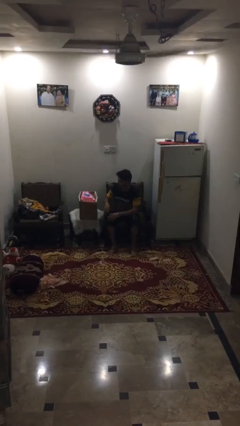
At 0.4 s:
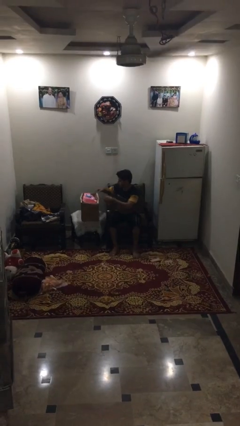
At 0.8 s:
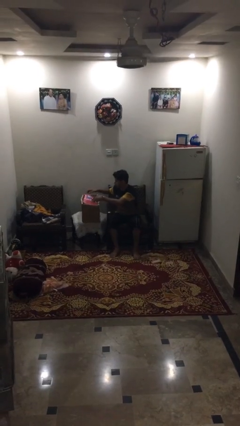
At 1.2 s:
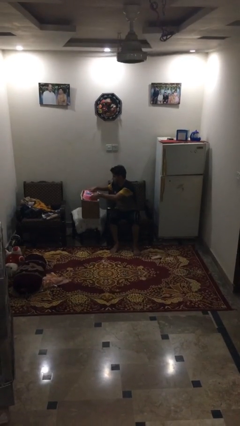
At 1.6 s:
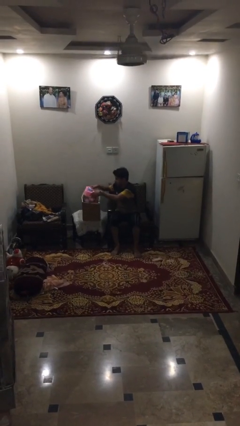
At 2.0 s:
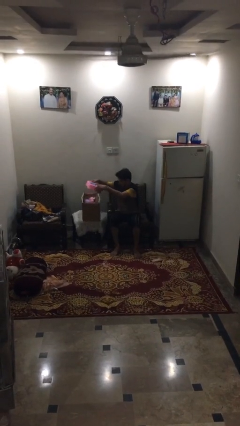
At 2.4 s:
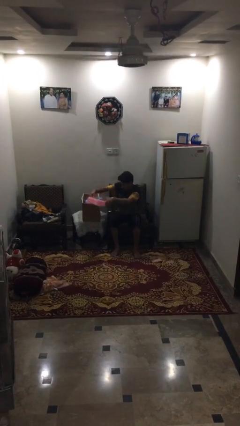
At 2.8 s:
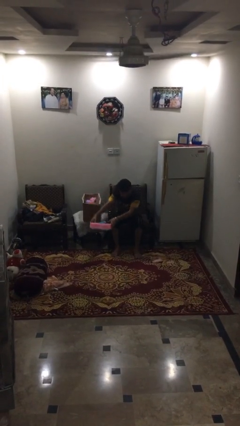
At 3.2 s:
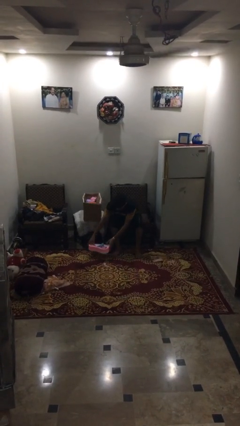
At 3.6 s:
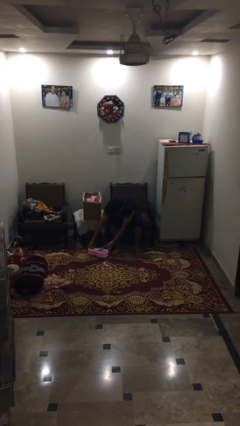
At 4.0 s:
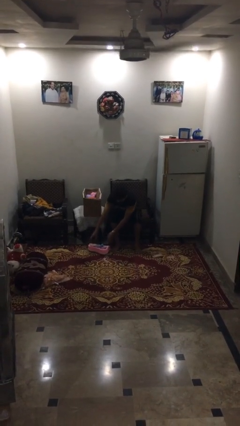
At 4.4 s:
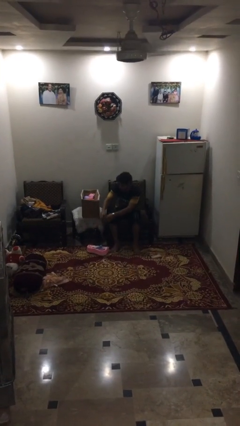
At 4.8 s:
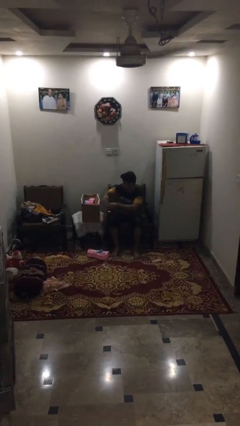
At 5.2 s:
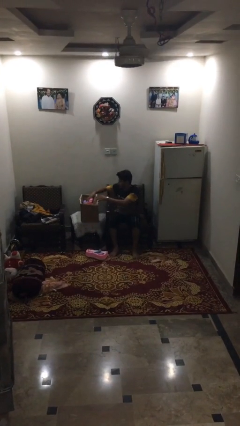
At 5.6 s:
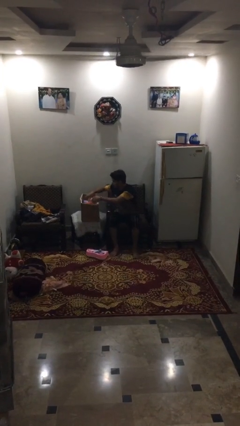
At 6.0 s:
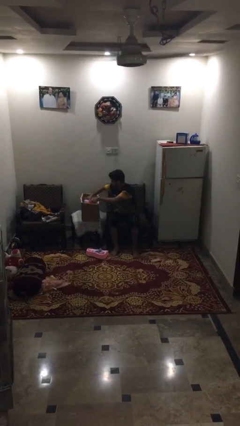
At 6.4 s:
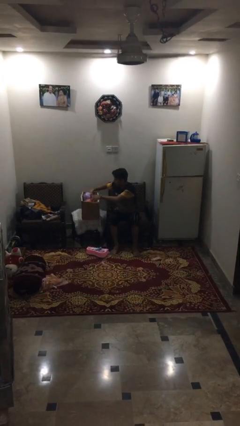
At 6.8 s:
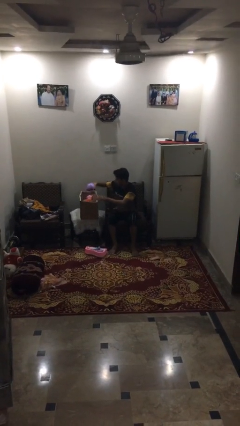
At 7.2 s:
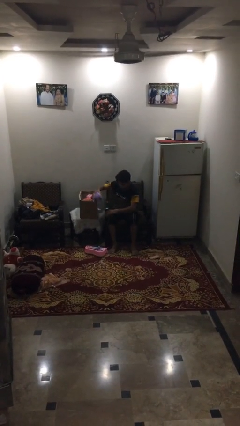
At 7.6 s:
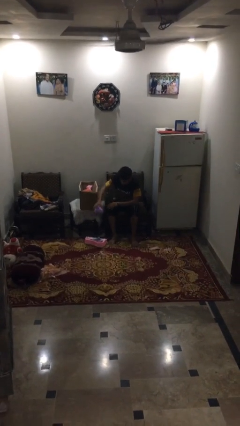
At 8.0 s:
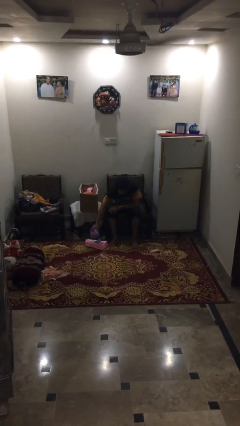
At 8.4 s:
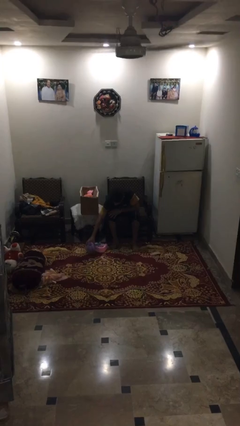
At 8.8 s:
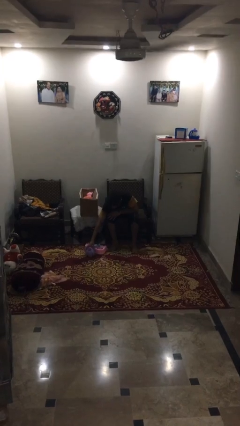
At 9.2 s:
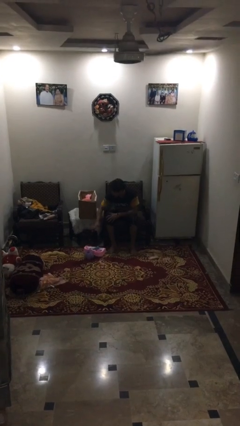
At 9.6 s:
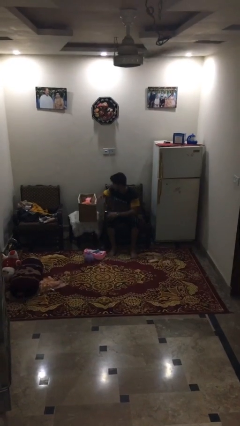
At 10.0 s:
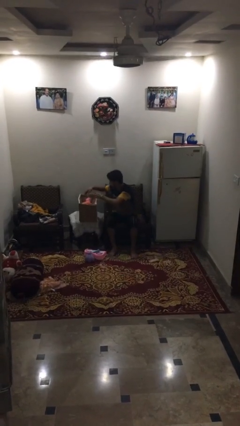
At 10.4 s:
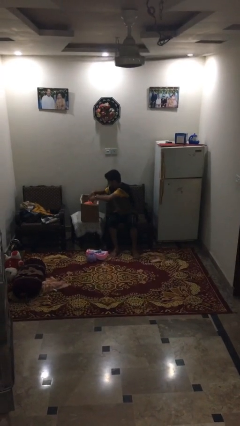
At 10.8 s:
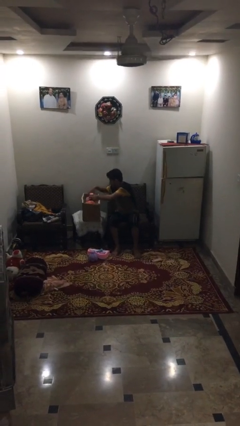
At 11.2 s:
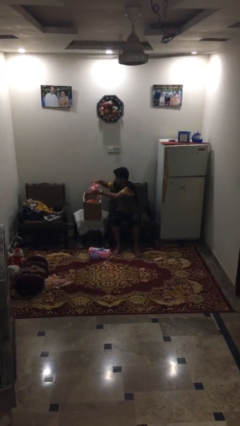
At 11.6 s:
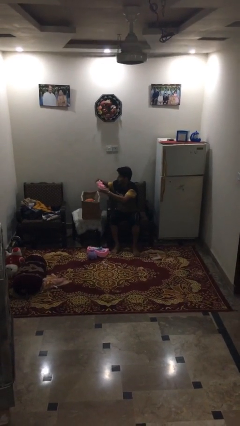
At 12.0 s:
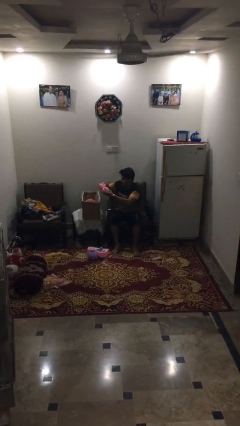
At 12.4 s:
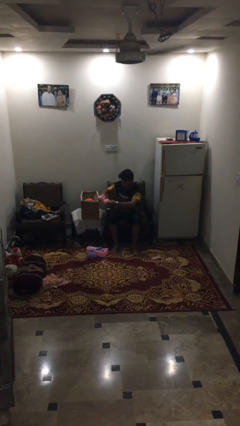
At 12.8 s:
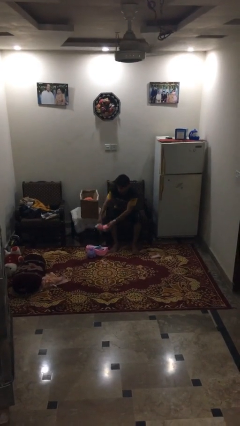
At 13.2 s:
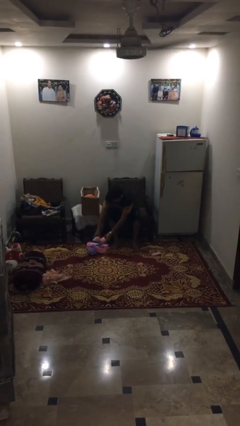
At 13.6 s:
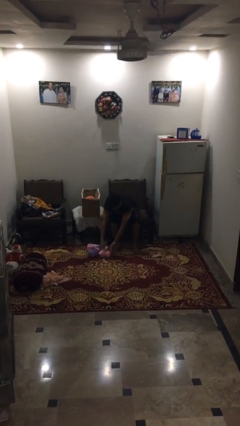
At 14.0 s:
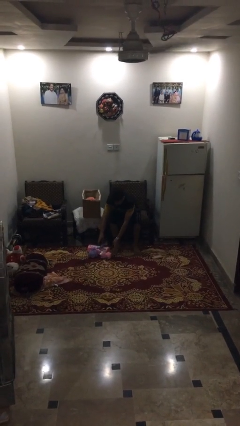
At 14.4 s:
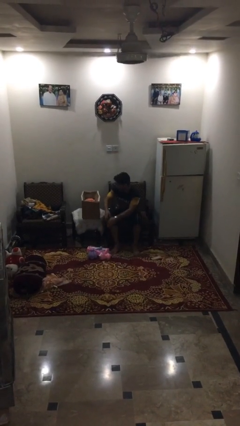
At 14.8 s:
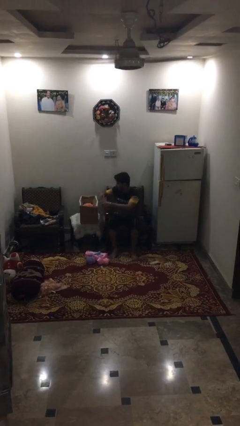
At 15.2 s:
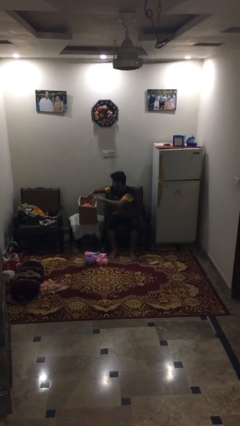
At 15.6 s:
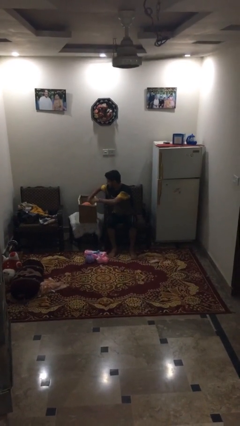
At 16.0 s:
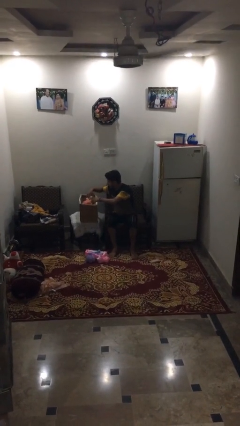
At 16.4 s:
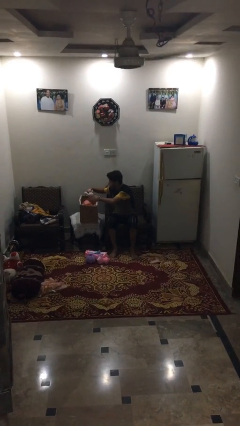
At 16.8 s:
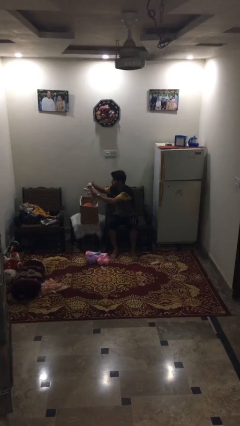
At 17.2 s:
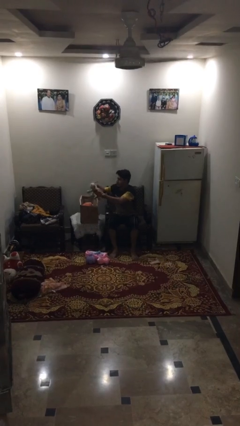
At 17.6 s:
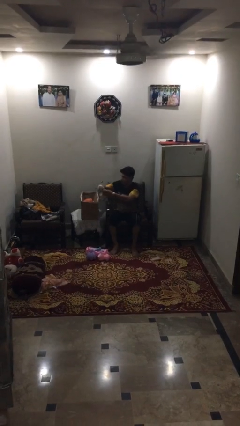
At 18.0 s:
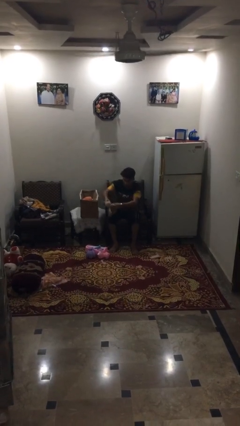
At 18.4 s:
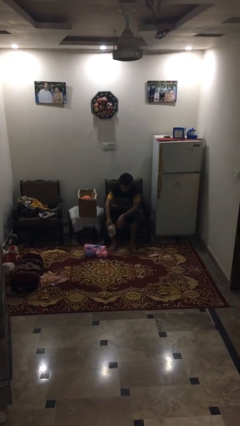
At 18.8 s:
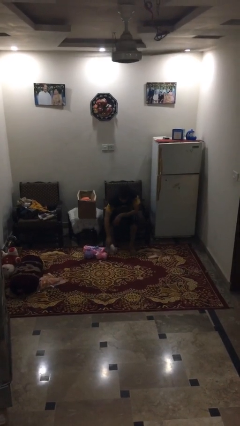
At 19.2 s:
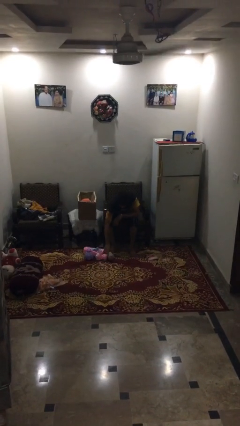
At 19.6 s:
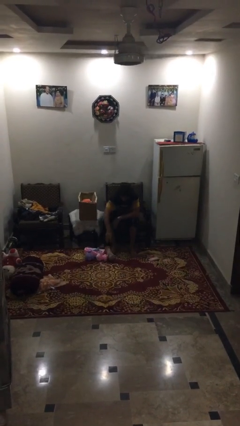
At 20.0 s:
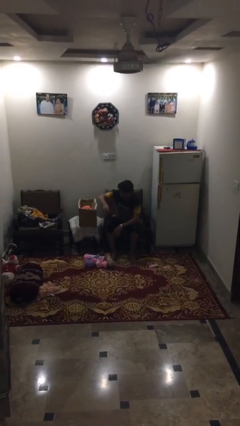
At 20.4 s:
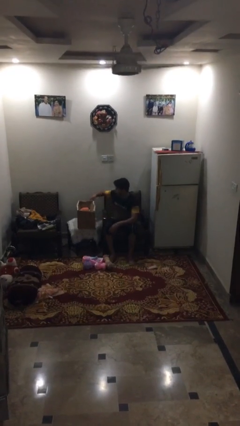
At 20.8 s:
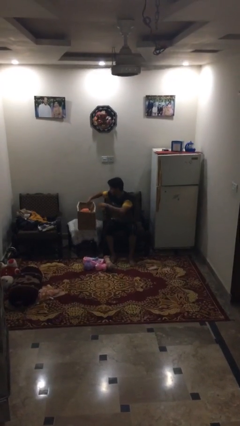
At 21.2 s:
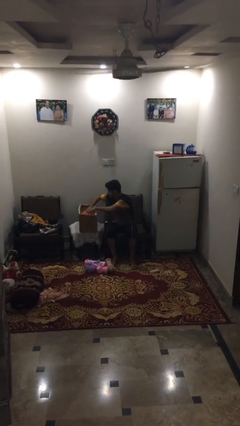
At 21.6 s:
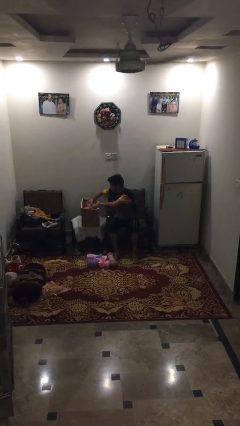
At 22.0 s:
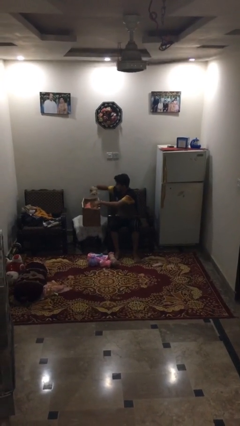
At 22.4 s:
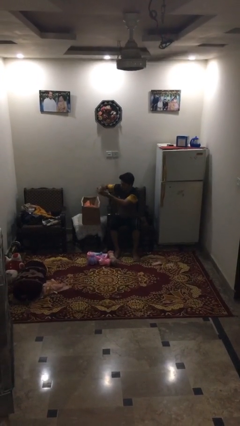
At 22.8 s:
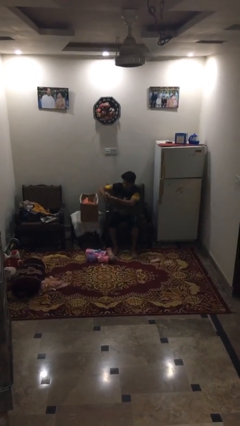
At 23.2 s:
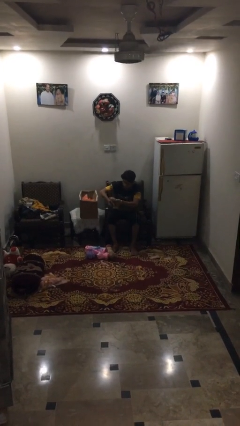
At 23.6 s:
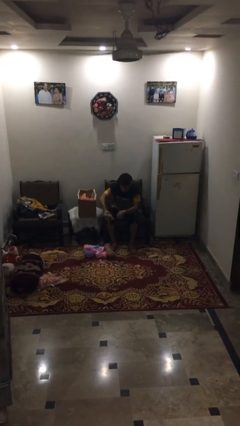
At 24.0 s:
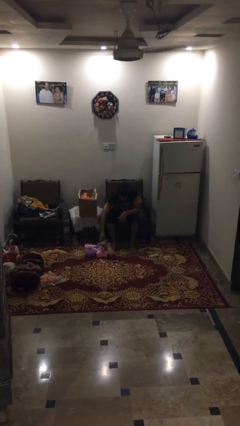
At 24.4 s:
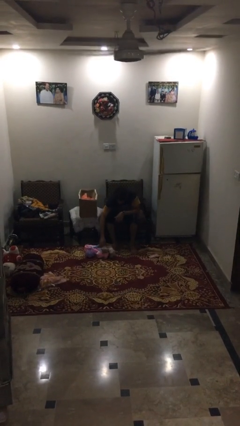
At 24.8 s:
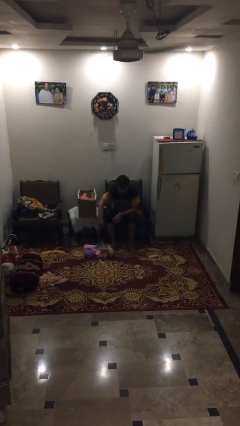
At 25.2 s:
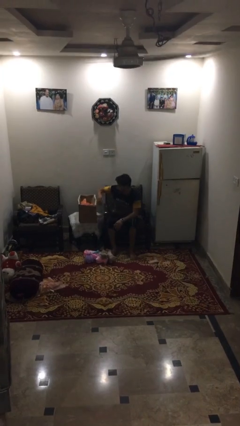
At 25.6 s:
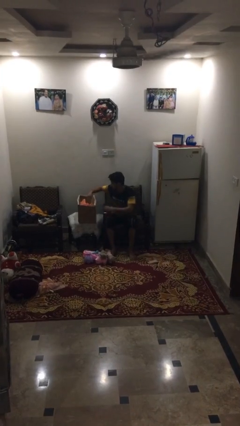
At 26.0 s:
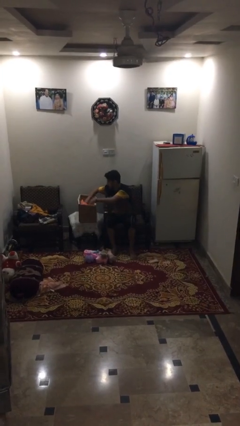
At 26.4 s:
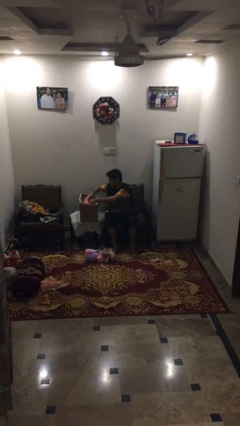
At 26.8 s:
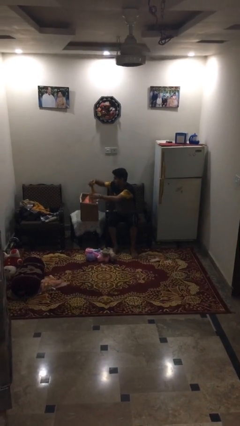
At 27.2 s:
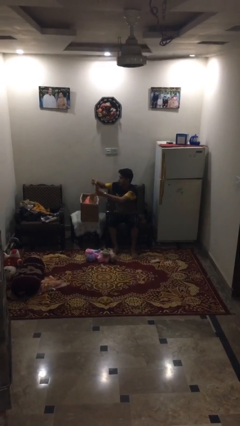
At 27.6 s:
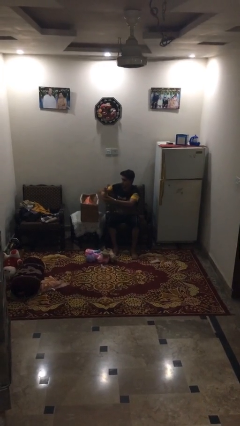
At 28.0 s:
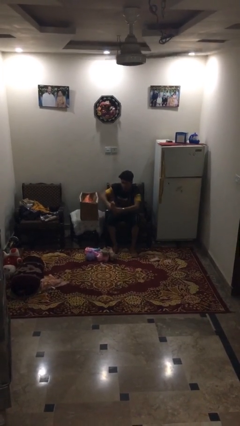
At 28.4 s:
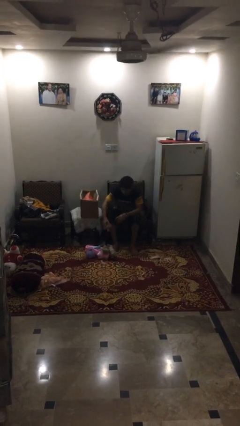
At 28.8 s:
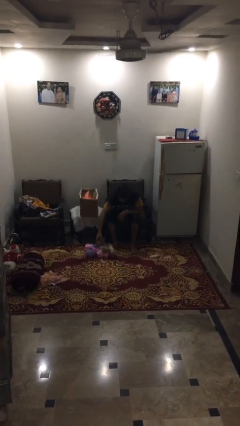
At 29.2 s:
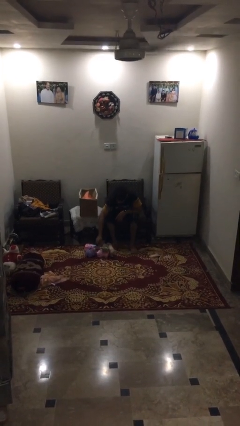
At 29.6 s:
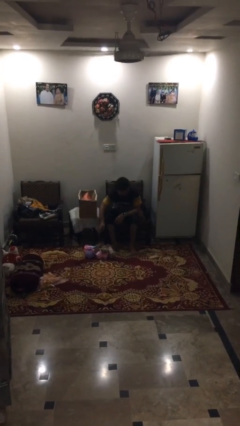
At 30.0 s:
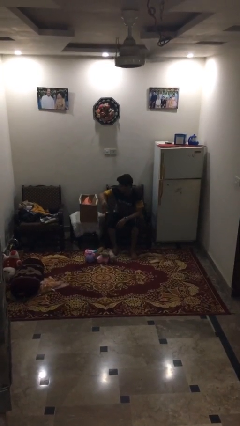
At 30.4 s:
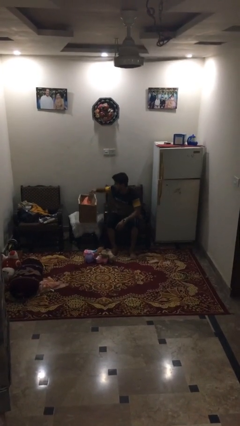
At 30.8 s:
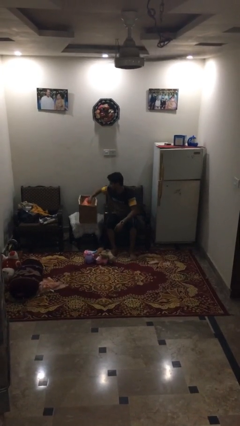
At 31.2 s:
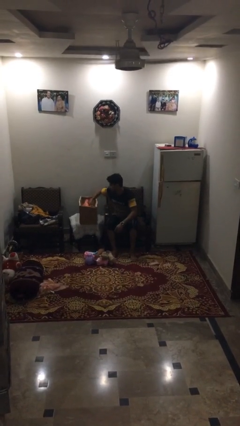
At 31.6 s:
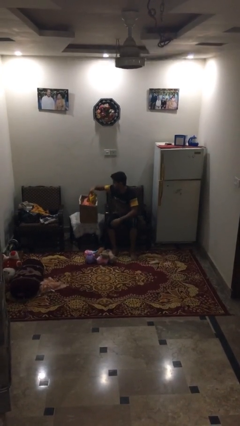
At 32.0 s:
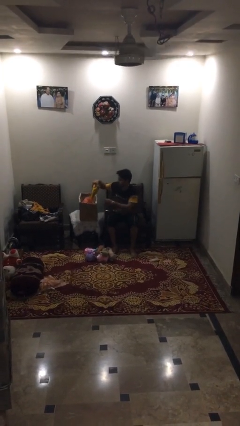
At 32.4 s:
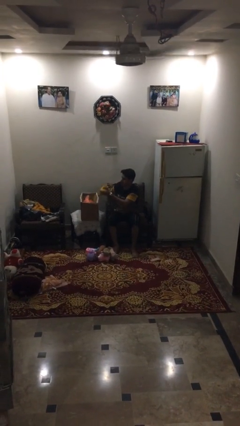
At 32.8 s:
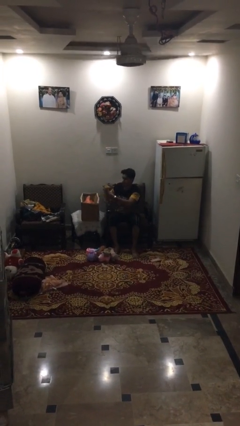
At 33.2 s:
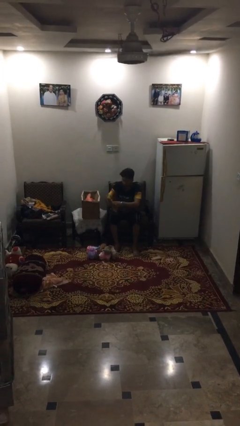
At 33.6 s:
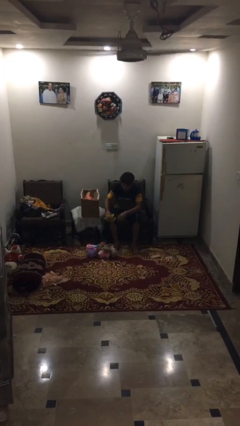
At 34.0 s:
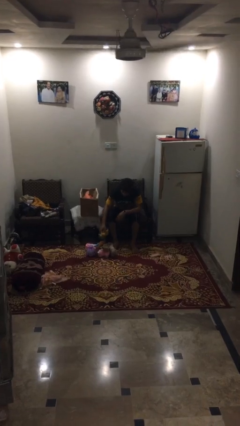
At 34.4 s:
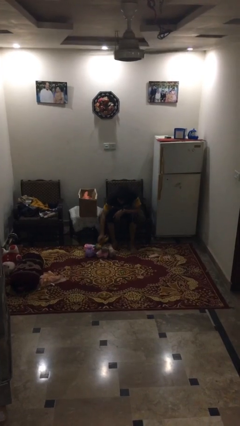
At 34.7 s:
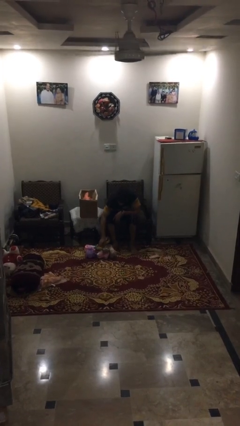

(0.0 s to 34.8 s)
person unloads box onto table

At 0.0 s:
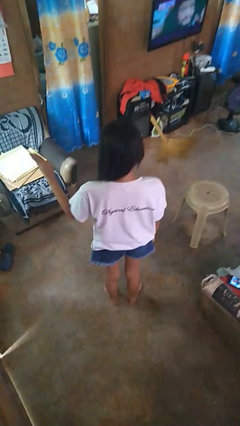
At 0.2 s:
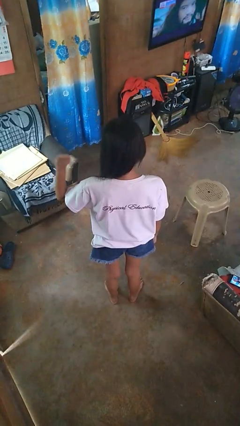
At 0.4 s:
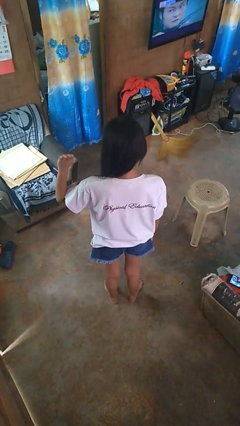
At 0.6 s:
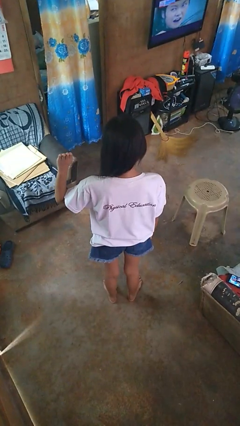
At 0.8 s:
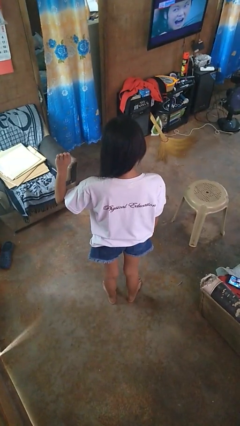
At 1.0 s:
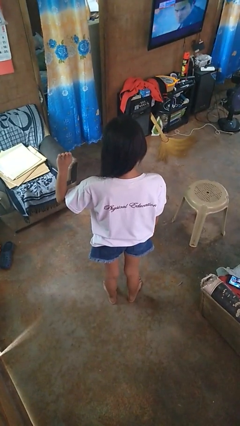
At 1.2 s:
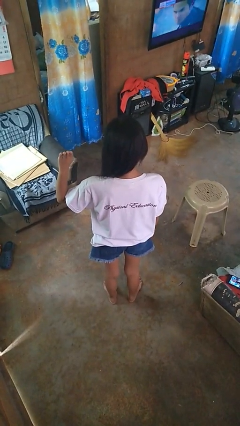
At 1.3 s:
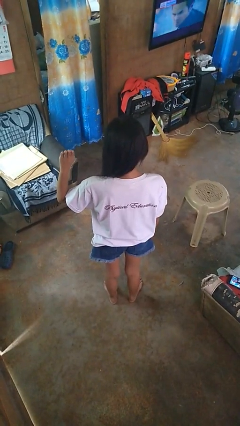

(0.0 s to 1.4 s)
person gestures number four
